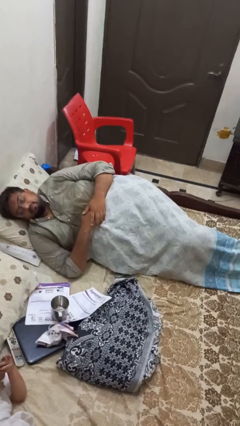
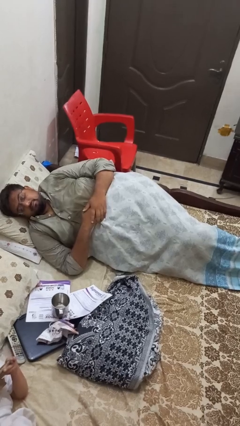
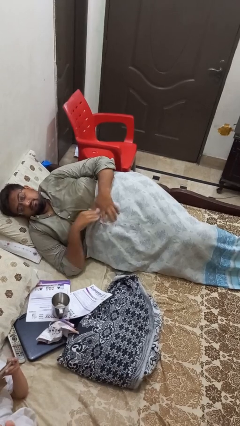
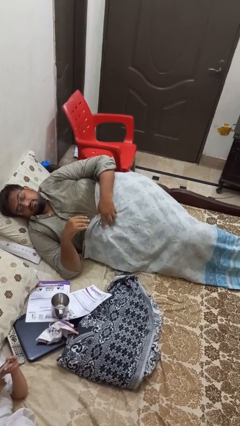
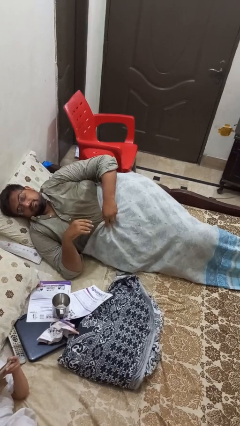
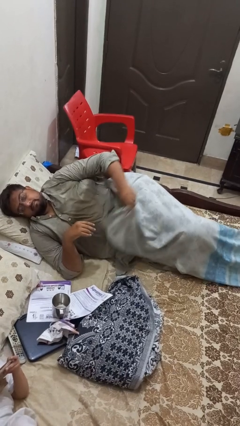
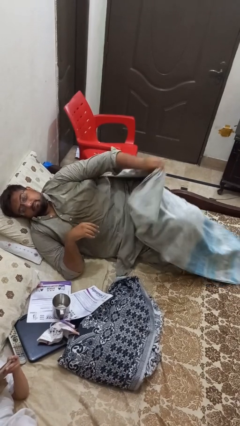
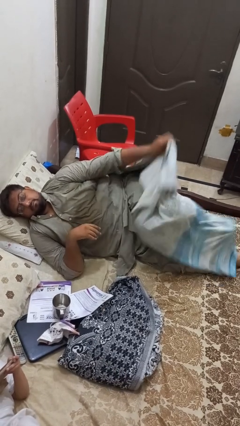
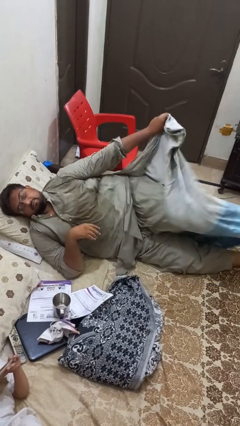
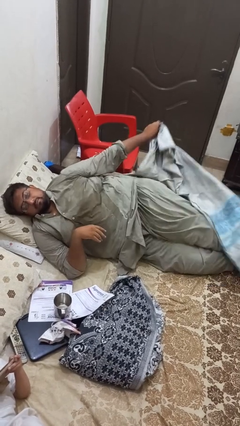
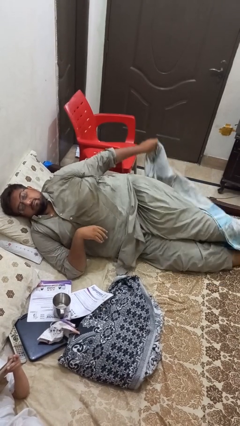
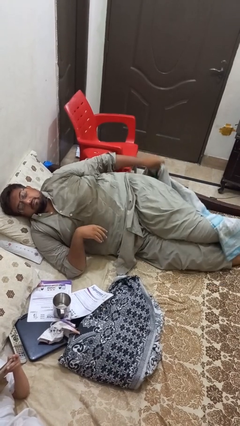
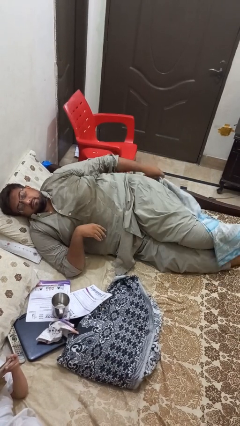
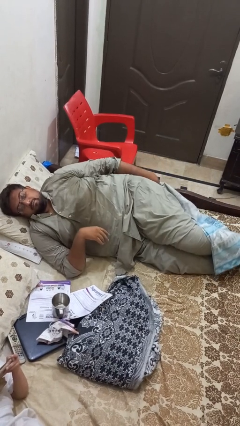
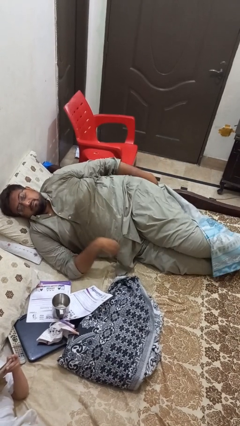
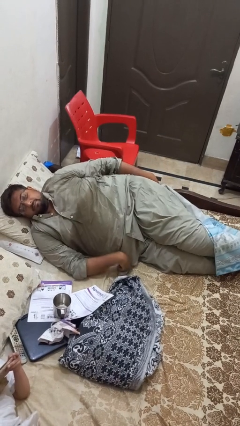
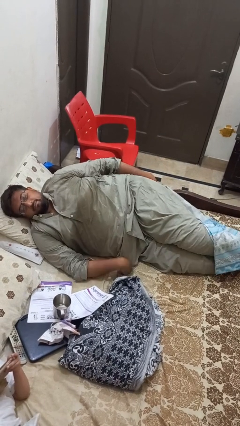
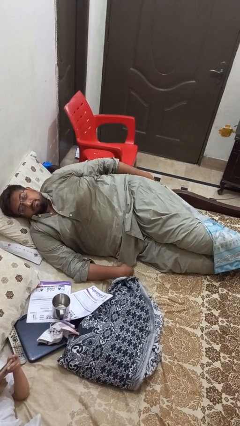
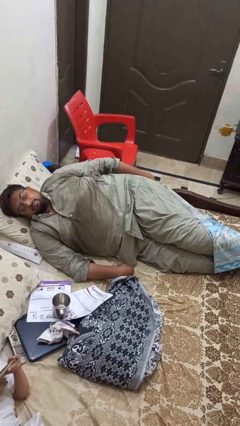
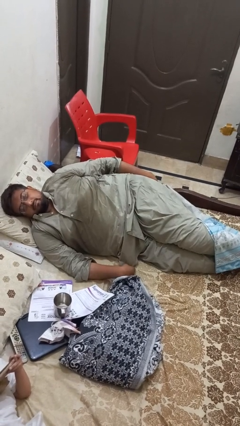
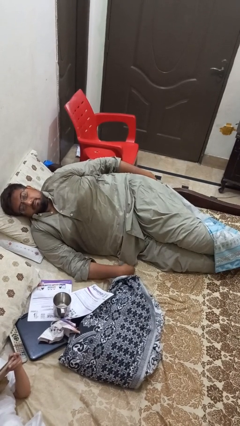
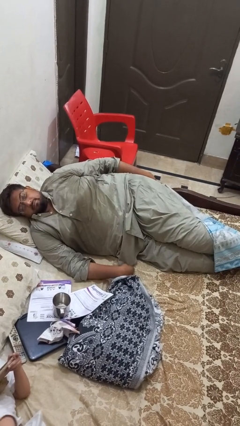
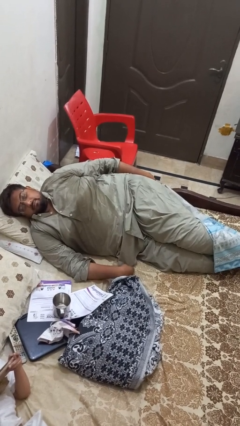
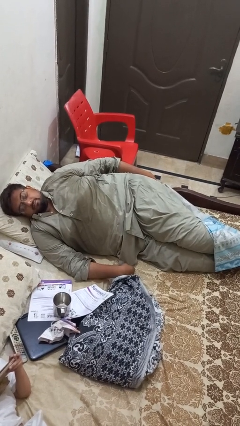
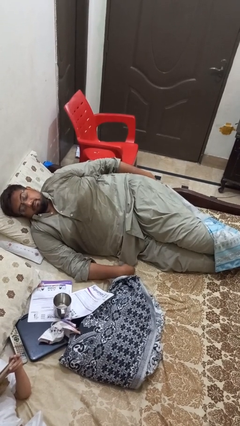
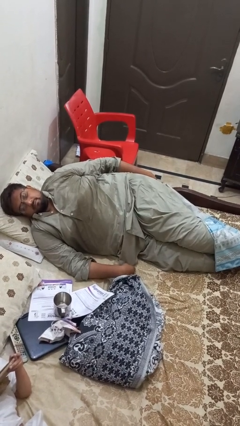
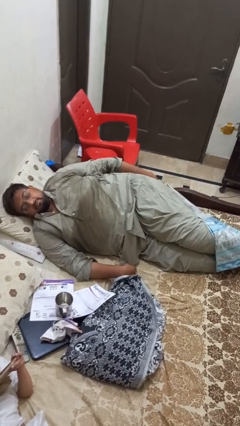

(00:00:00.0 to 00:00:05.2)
person uncovers with bedsheets

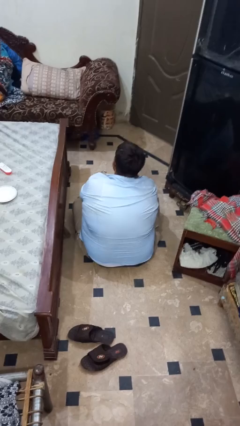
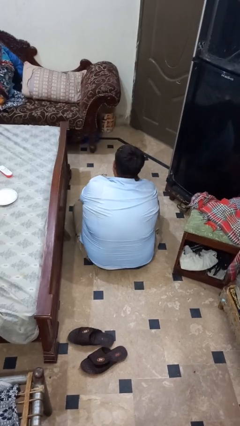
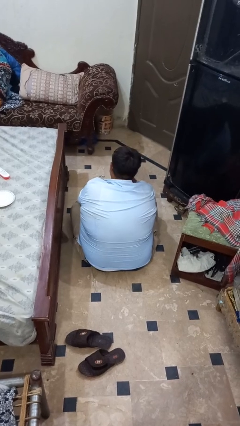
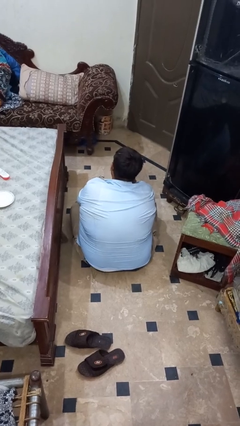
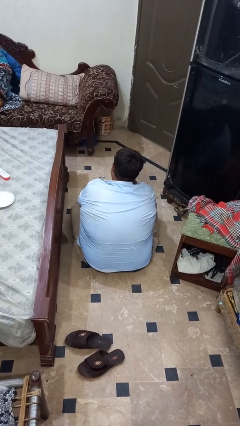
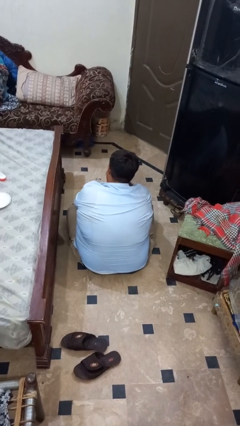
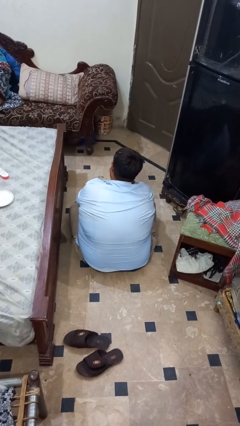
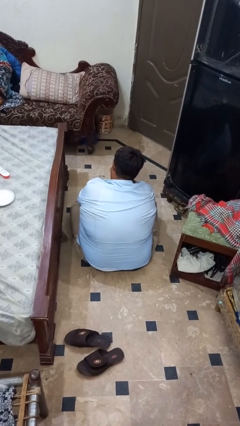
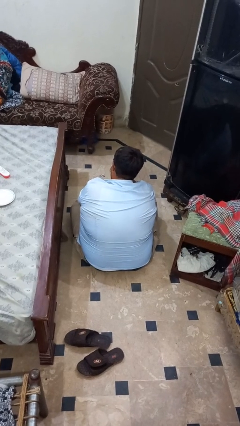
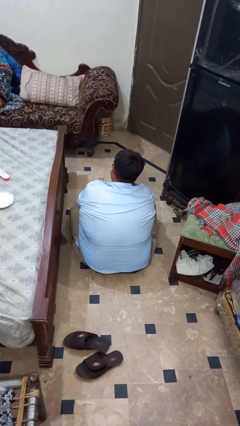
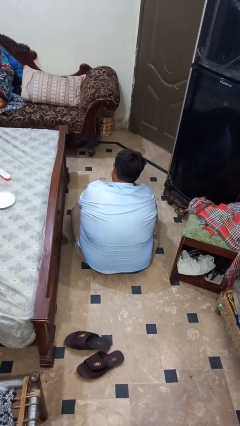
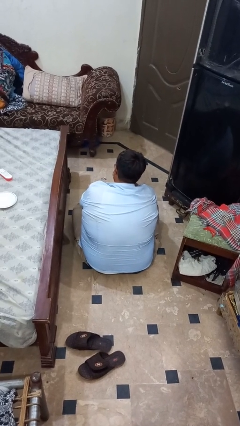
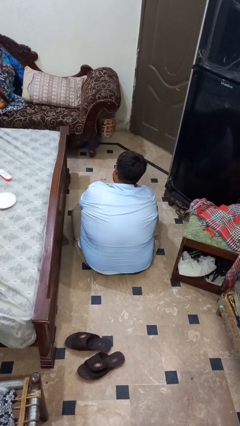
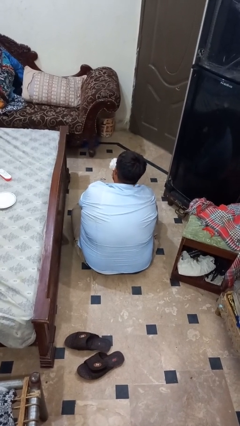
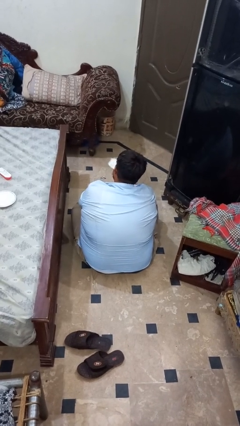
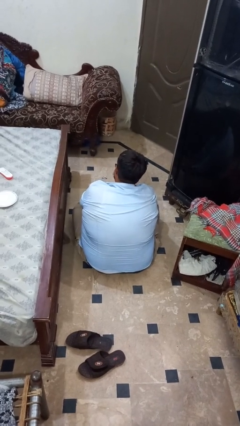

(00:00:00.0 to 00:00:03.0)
person blows nose

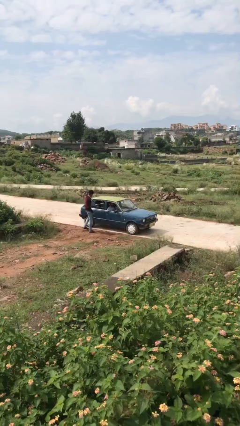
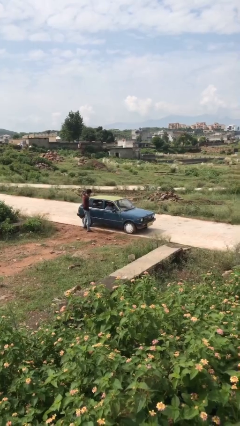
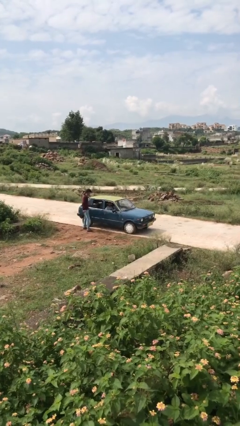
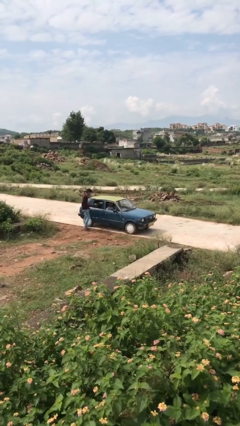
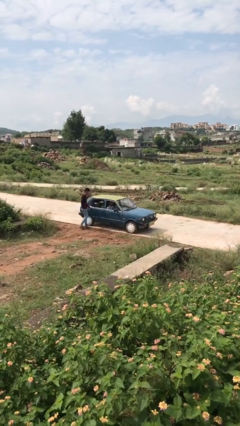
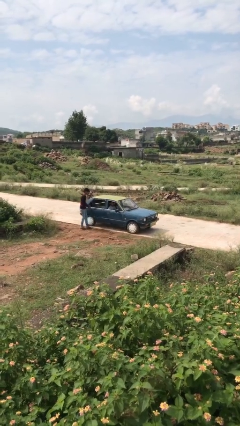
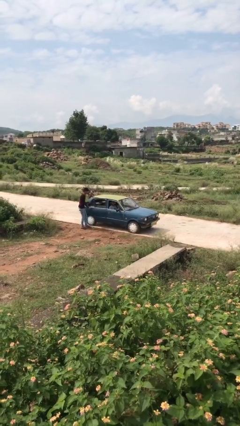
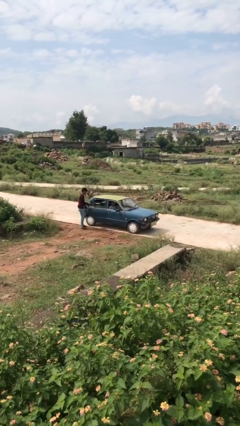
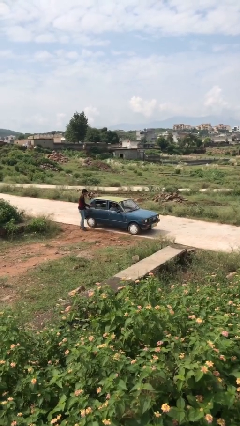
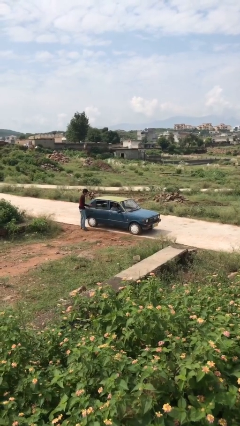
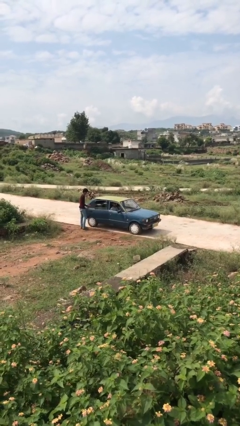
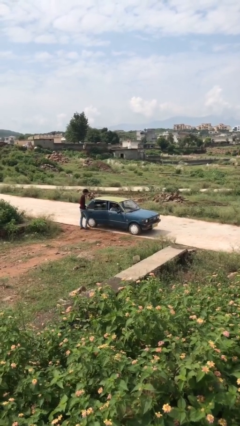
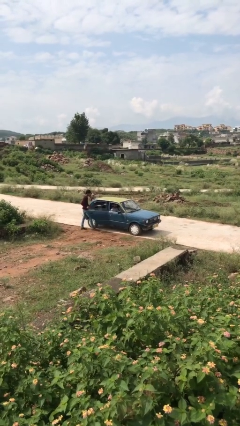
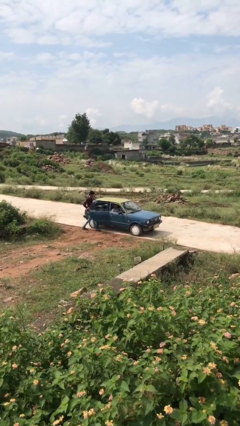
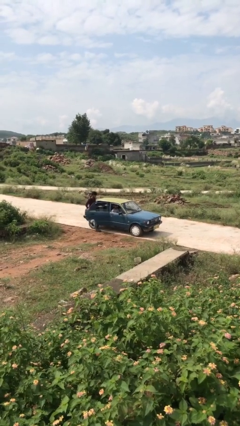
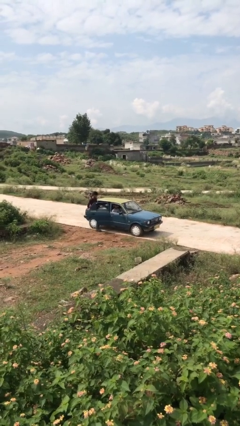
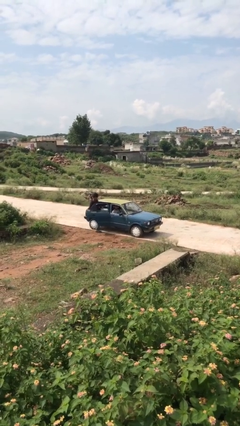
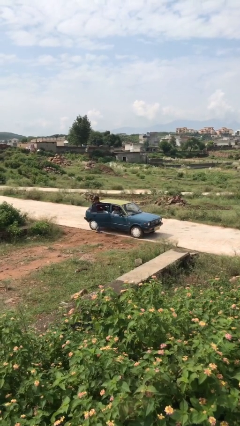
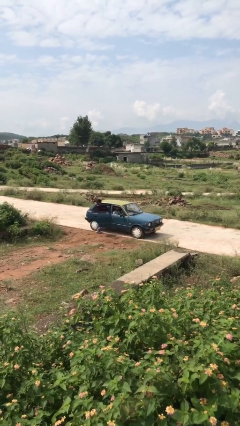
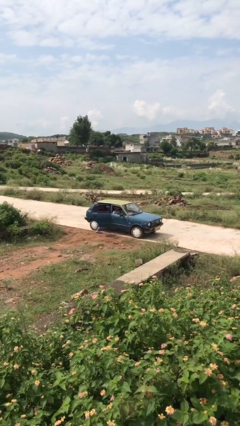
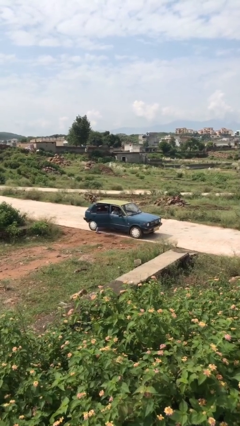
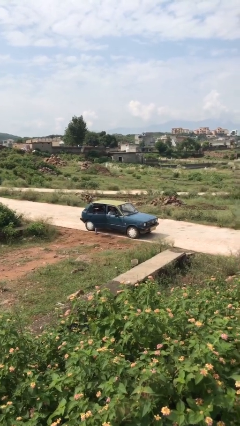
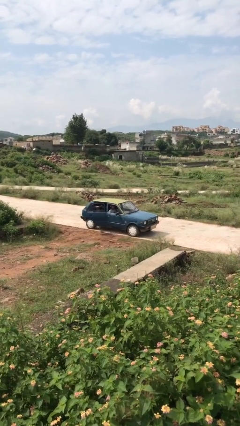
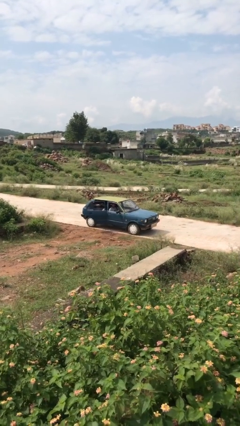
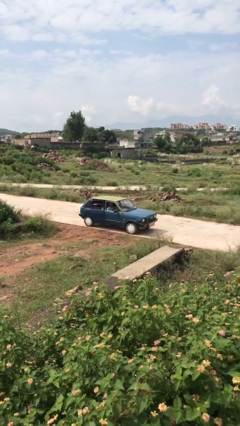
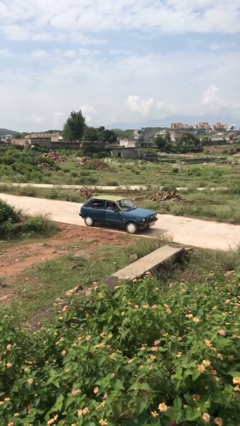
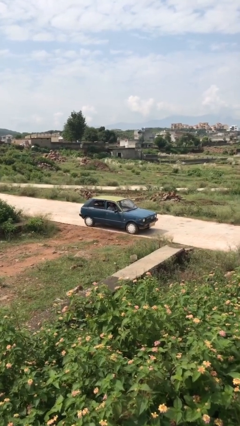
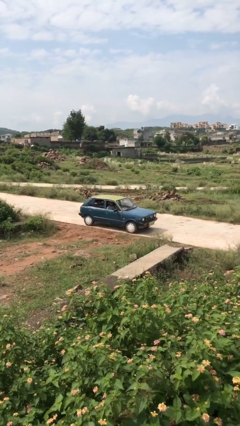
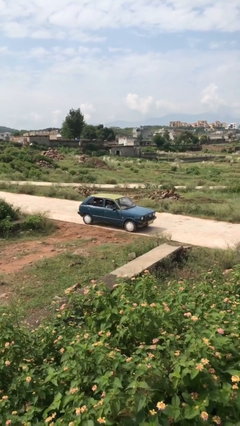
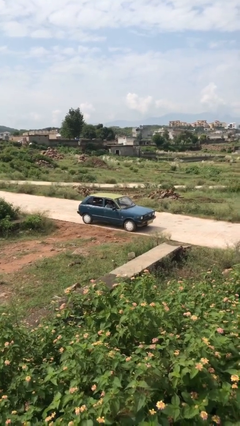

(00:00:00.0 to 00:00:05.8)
car picks up person

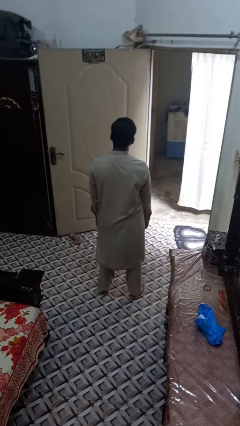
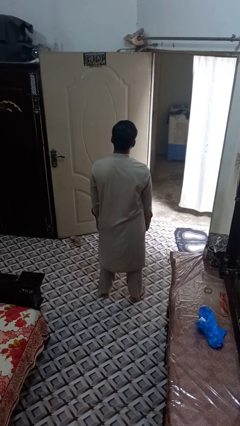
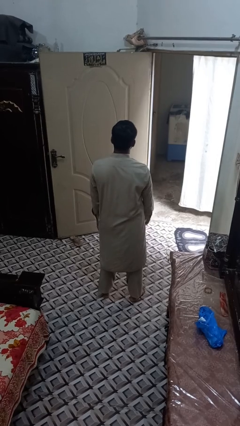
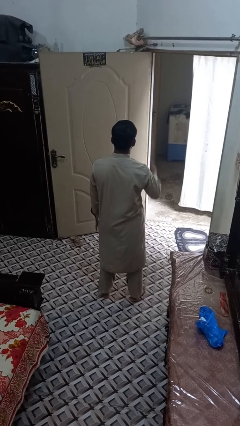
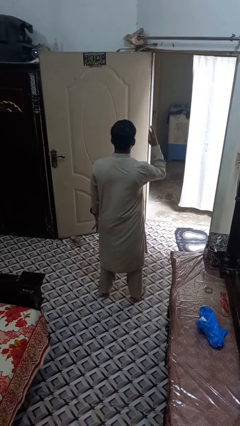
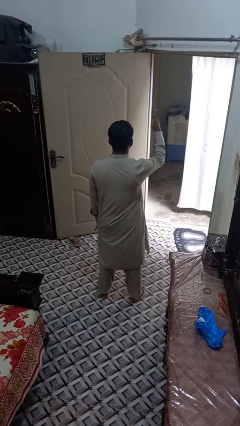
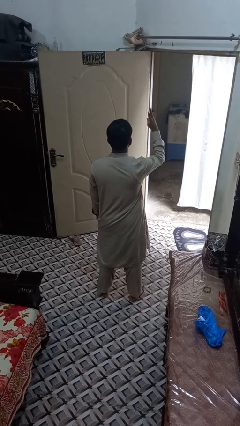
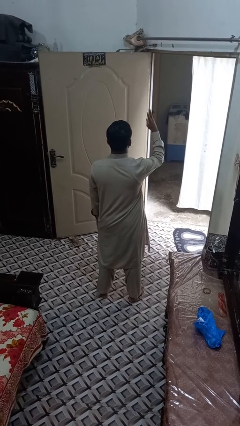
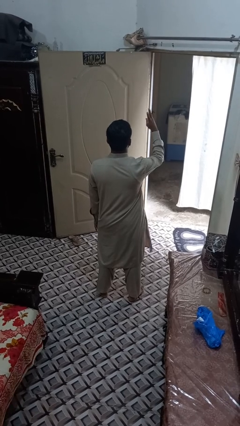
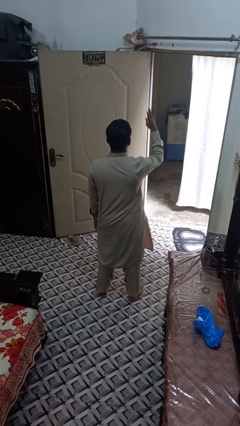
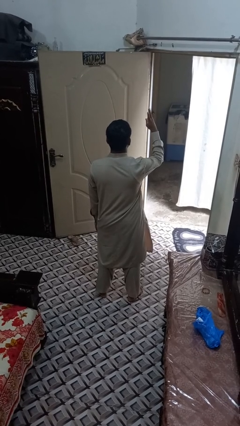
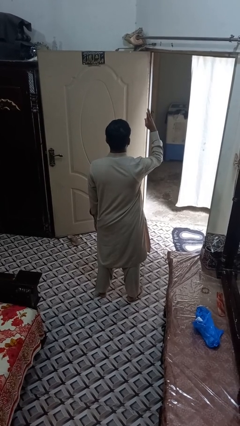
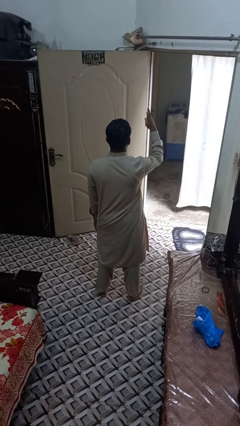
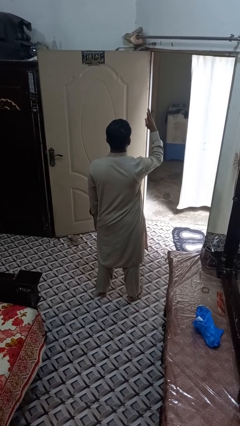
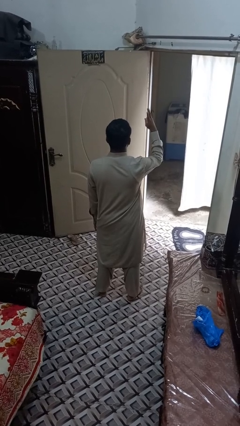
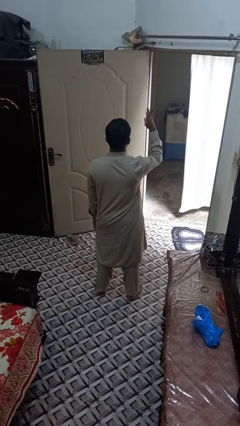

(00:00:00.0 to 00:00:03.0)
person gestures number three

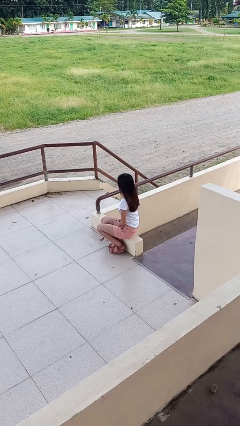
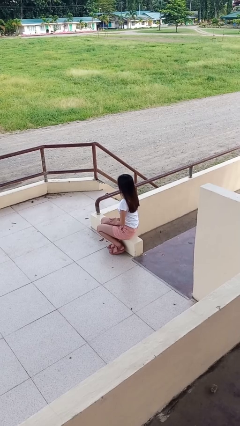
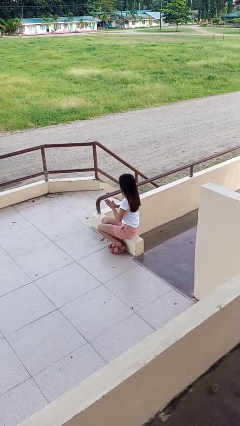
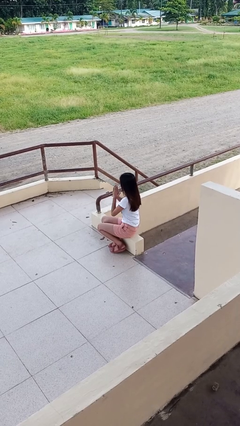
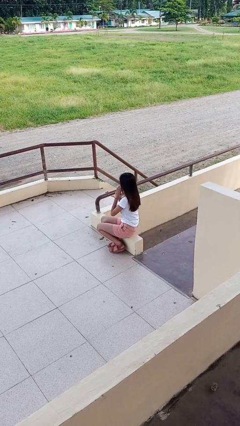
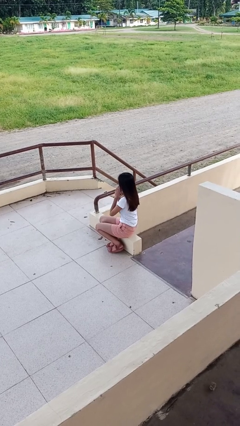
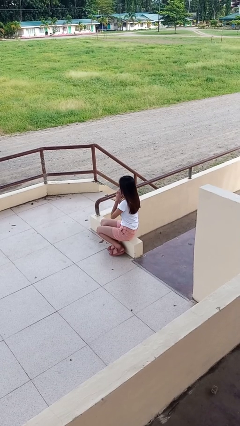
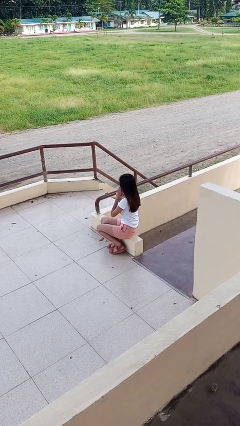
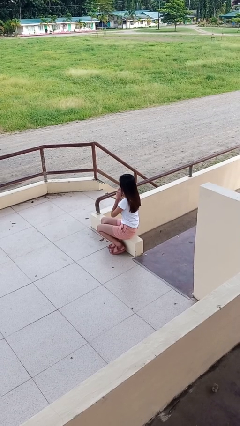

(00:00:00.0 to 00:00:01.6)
person prays
